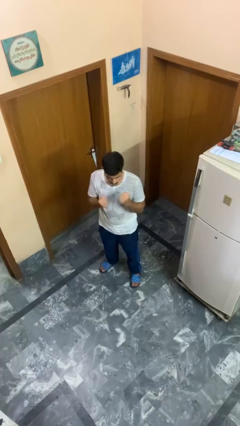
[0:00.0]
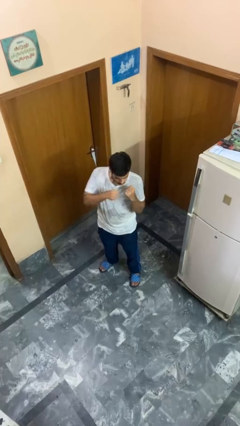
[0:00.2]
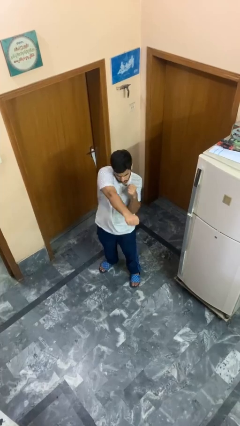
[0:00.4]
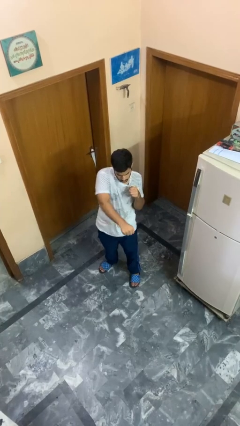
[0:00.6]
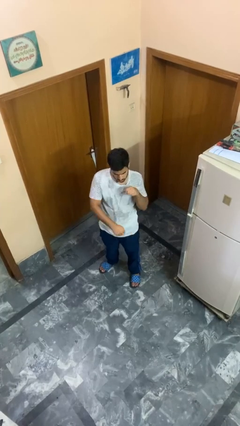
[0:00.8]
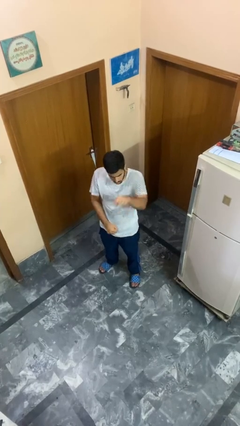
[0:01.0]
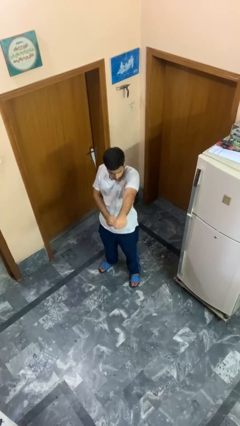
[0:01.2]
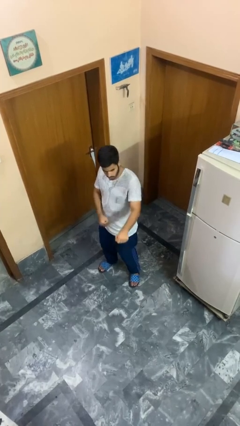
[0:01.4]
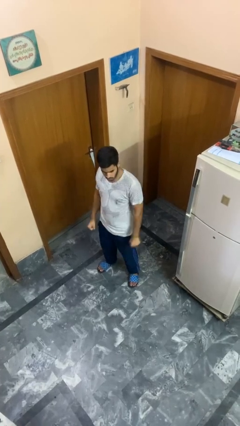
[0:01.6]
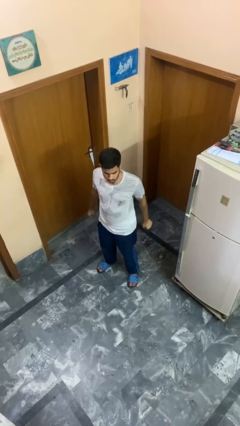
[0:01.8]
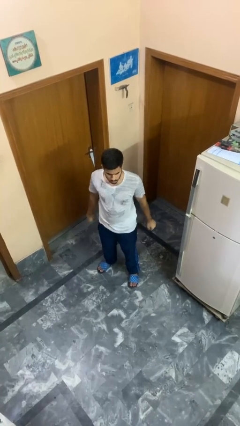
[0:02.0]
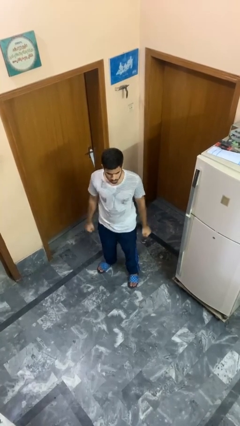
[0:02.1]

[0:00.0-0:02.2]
person punches

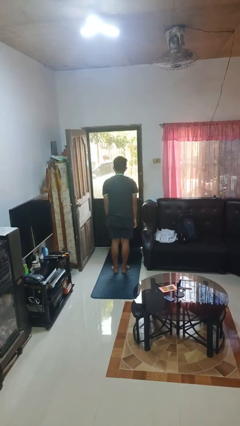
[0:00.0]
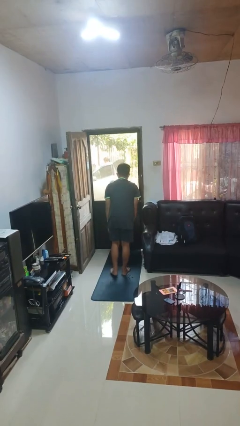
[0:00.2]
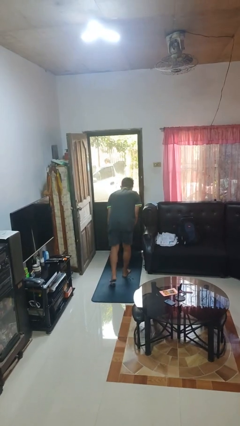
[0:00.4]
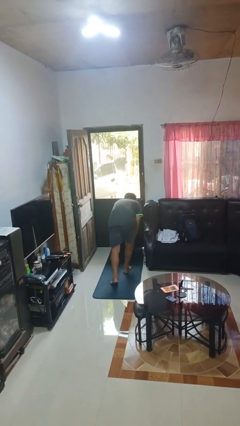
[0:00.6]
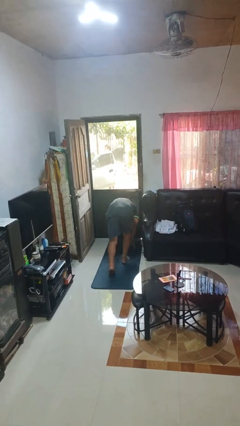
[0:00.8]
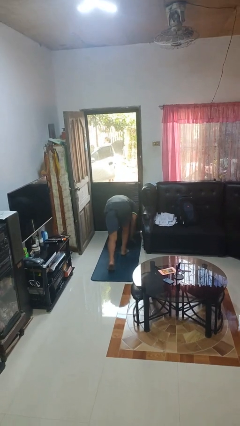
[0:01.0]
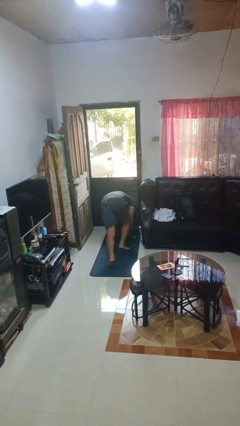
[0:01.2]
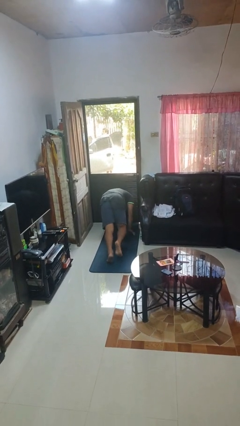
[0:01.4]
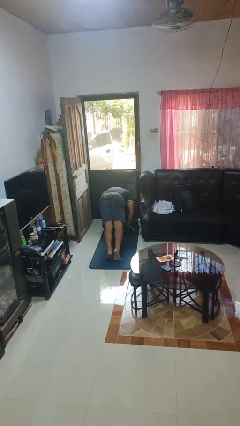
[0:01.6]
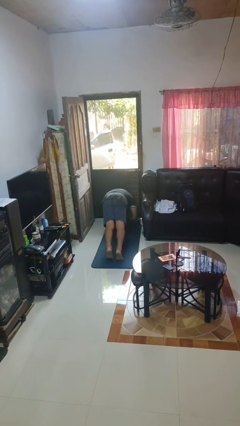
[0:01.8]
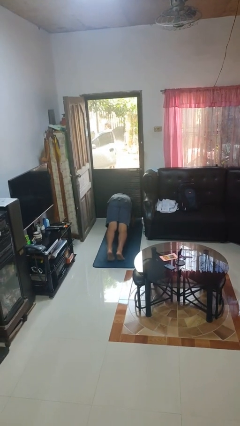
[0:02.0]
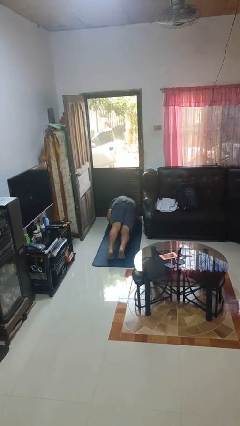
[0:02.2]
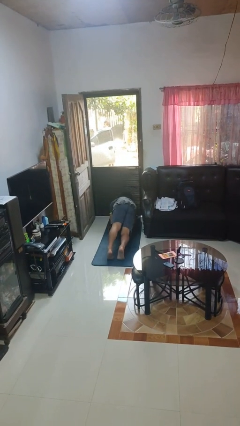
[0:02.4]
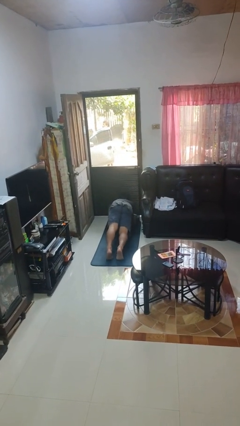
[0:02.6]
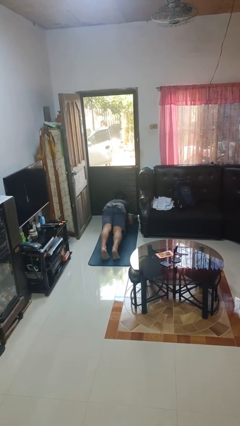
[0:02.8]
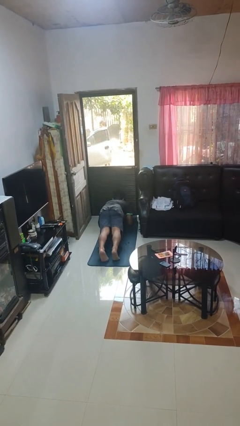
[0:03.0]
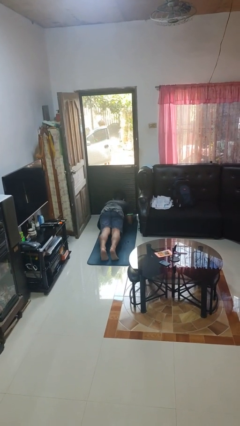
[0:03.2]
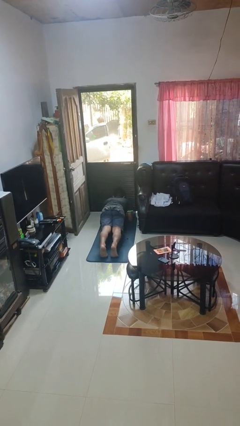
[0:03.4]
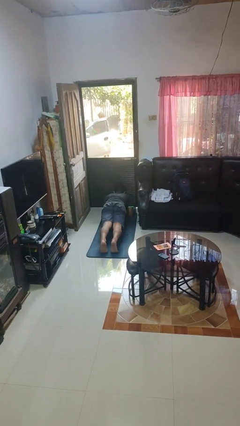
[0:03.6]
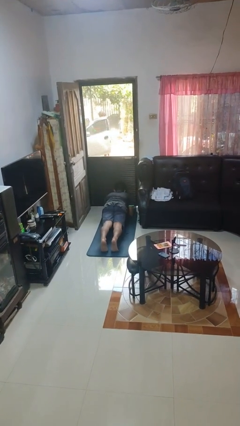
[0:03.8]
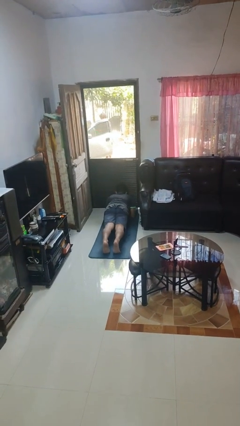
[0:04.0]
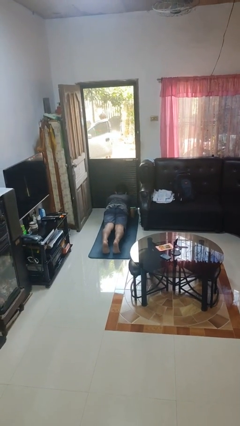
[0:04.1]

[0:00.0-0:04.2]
person exercises with plank

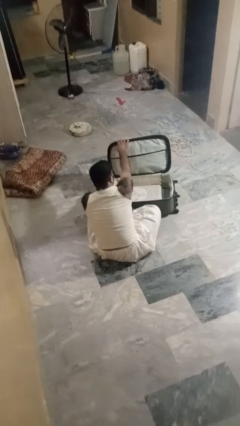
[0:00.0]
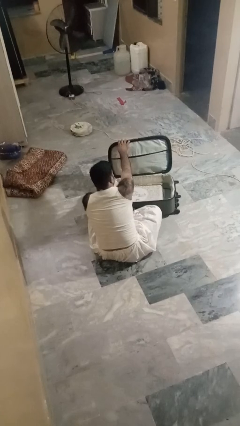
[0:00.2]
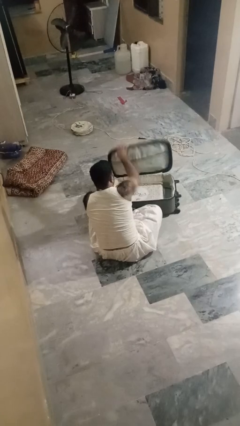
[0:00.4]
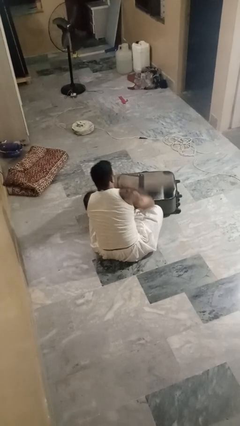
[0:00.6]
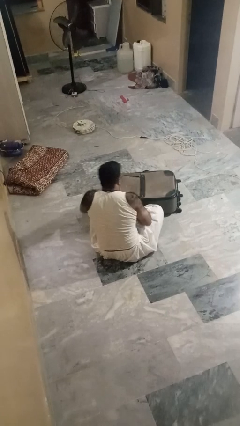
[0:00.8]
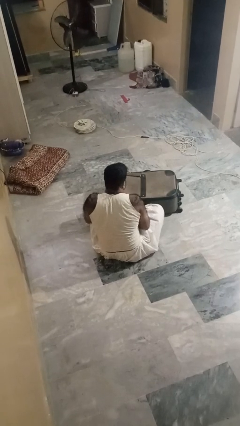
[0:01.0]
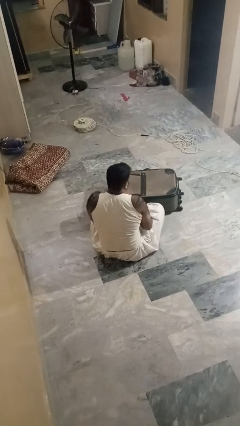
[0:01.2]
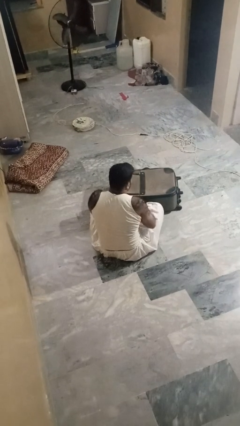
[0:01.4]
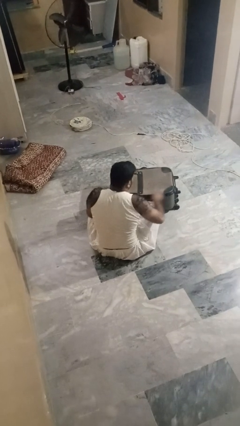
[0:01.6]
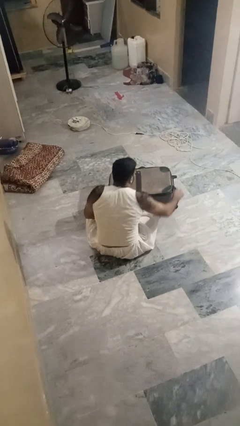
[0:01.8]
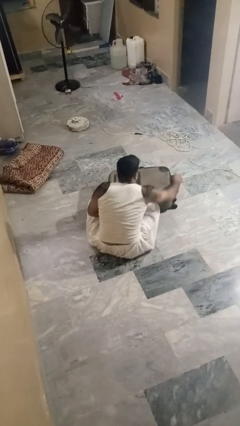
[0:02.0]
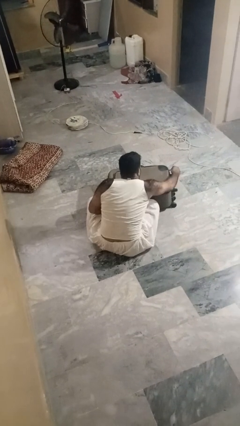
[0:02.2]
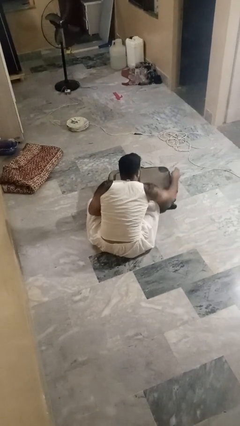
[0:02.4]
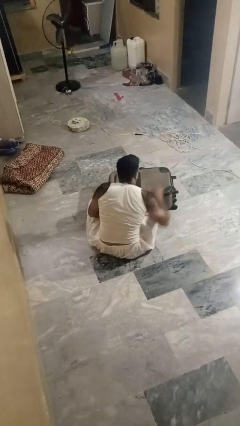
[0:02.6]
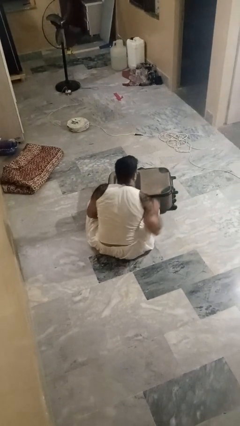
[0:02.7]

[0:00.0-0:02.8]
person closes suitcase

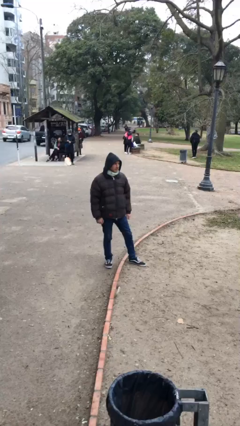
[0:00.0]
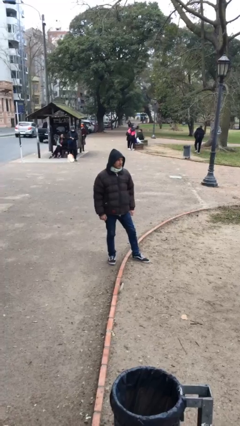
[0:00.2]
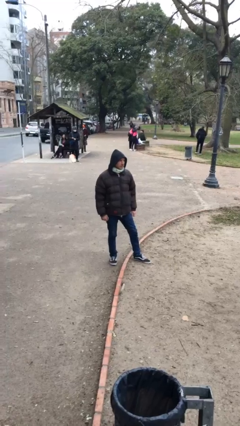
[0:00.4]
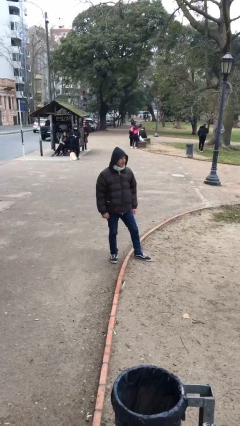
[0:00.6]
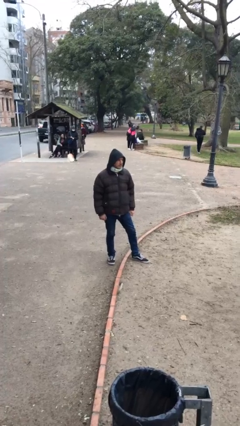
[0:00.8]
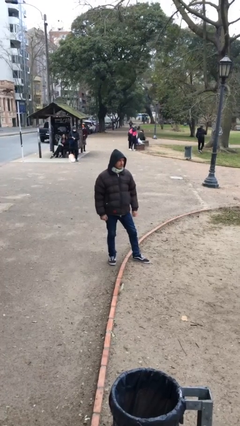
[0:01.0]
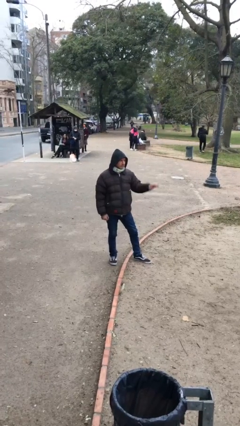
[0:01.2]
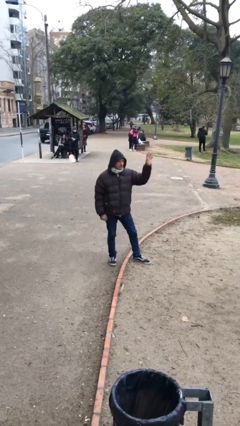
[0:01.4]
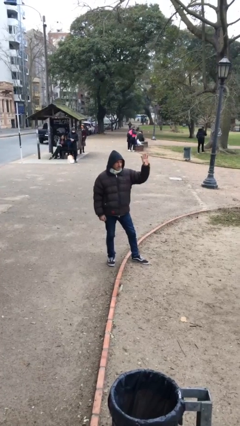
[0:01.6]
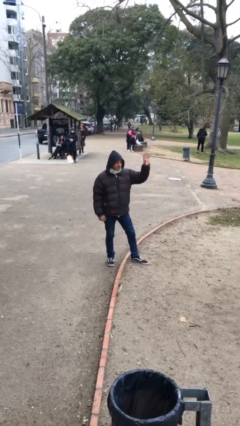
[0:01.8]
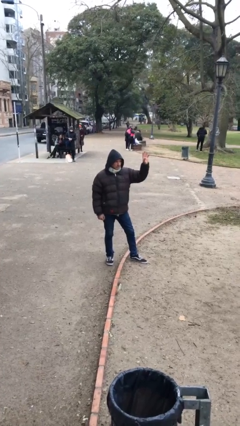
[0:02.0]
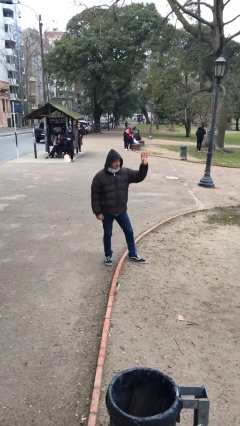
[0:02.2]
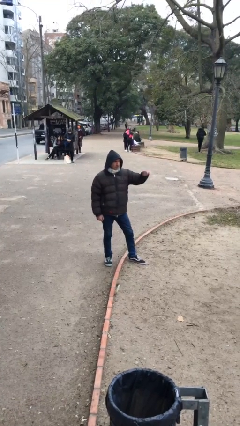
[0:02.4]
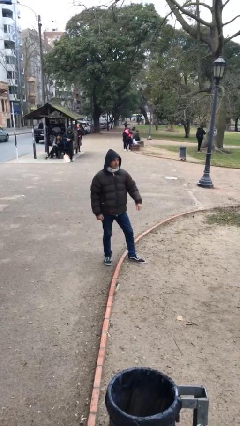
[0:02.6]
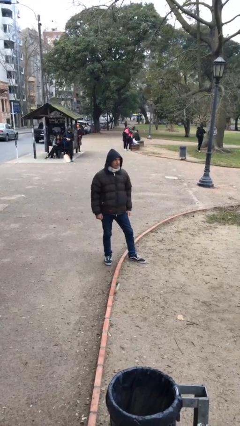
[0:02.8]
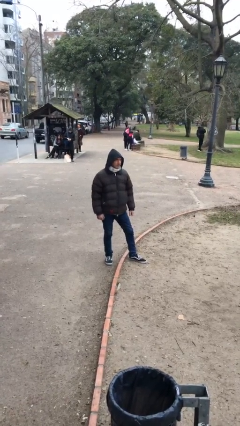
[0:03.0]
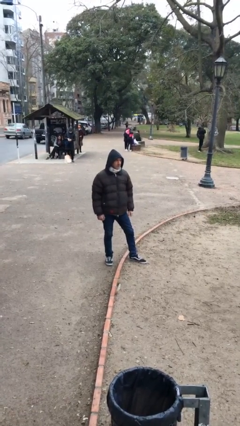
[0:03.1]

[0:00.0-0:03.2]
person waves at person

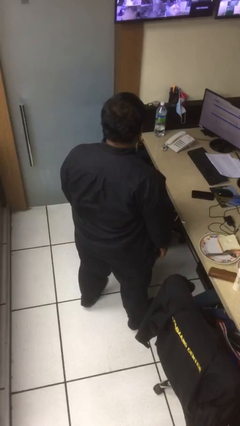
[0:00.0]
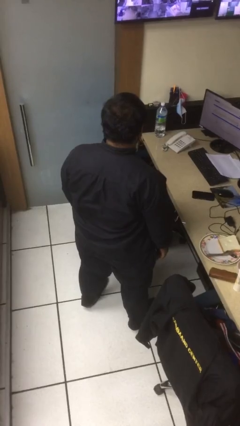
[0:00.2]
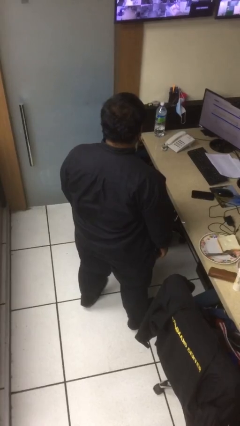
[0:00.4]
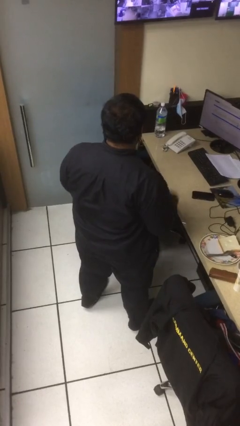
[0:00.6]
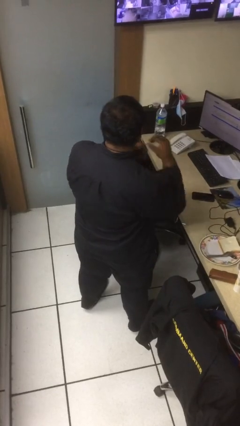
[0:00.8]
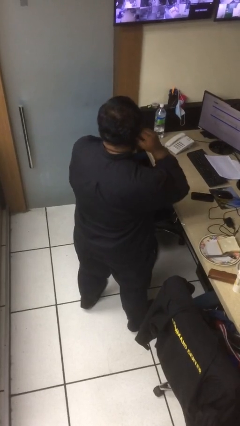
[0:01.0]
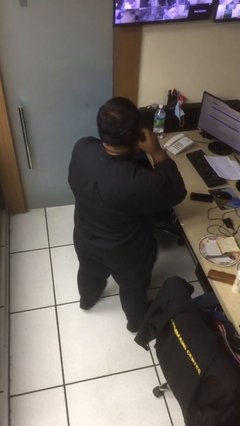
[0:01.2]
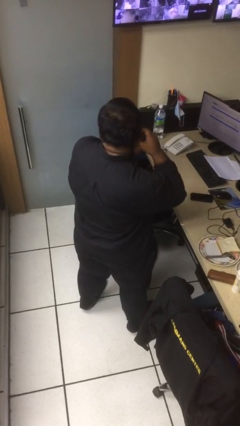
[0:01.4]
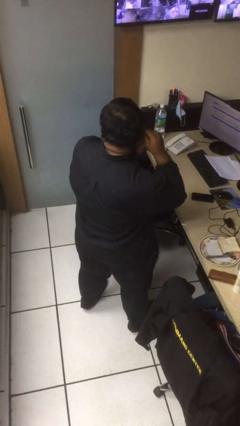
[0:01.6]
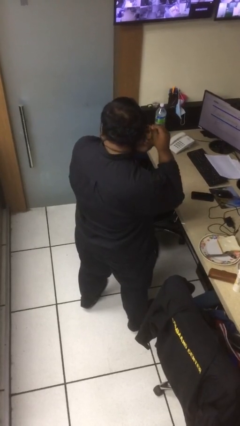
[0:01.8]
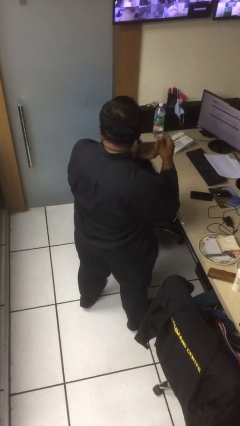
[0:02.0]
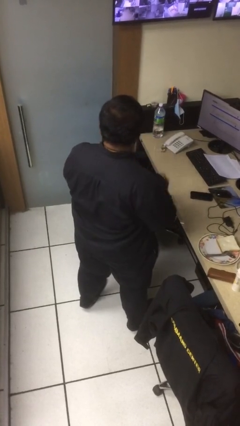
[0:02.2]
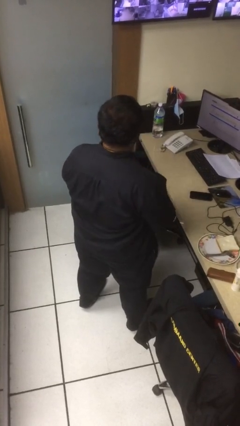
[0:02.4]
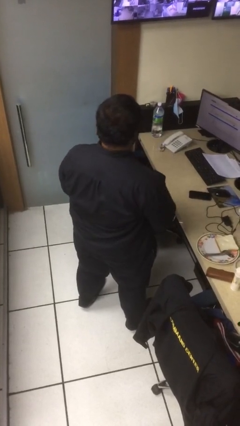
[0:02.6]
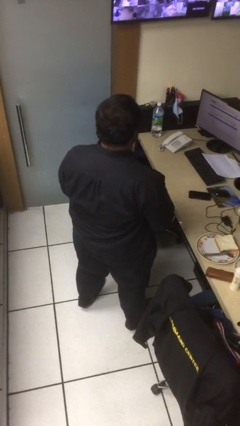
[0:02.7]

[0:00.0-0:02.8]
person takes off earrings

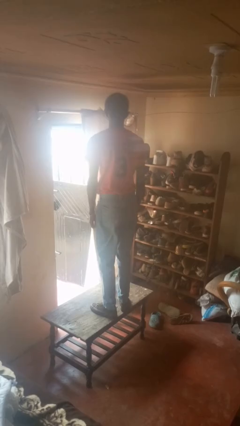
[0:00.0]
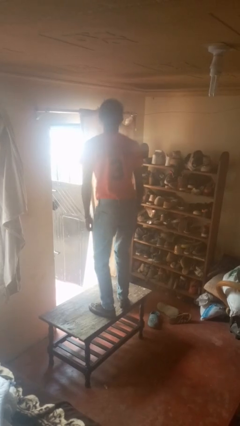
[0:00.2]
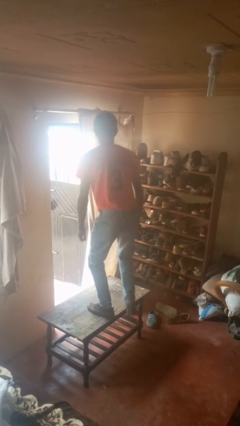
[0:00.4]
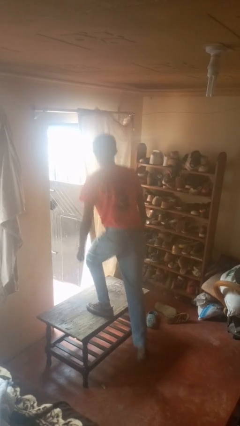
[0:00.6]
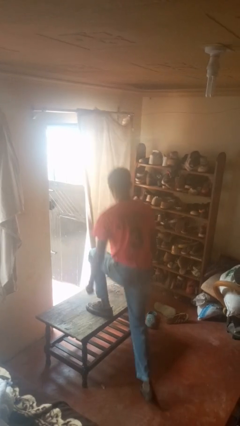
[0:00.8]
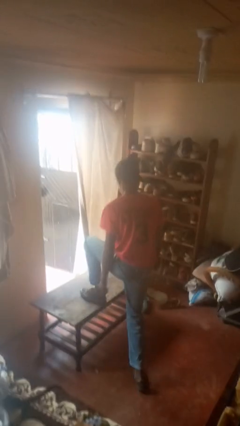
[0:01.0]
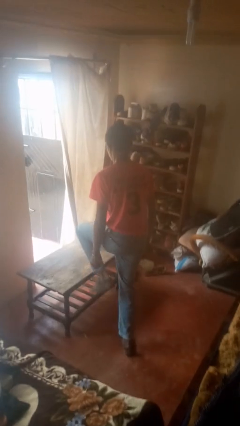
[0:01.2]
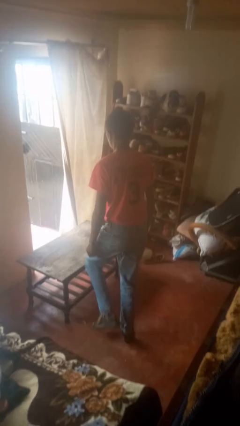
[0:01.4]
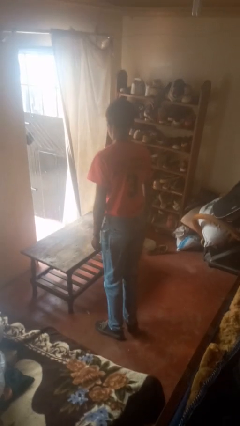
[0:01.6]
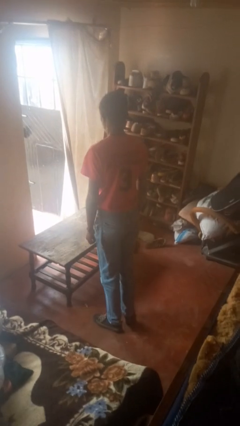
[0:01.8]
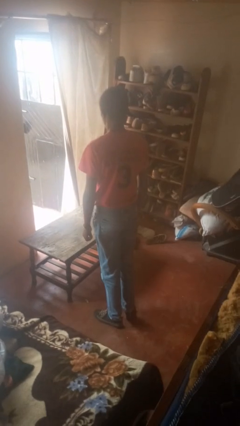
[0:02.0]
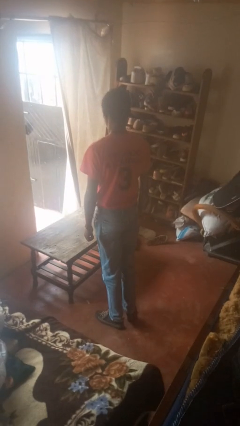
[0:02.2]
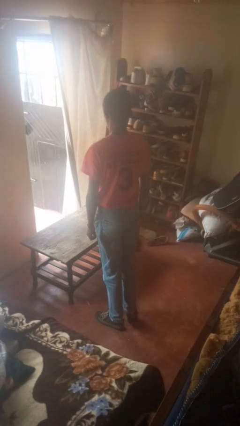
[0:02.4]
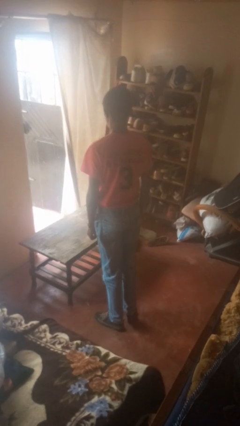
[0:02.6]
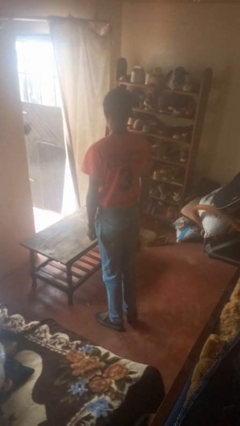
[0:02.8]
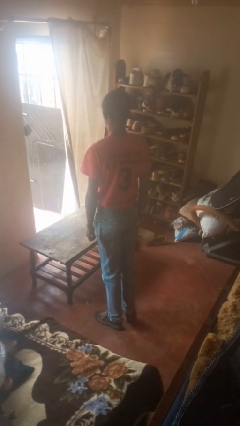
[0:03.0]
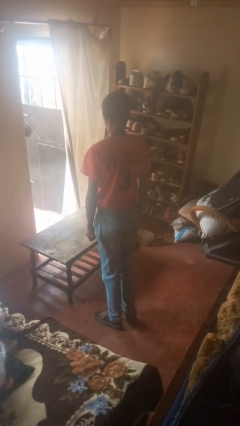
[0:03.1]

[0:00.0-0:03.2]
person climbs off table
